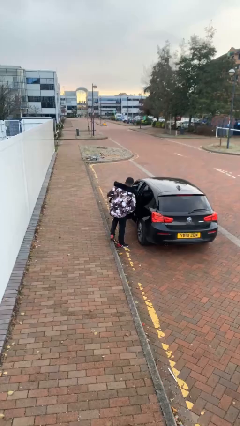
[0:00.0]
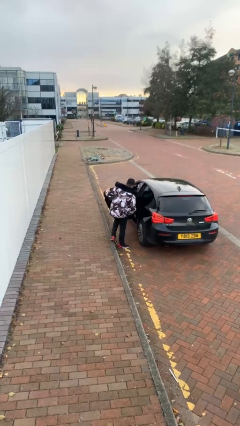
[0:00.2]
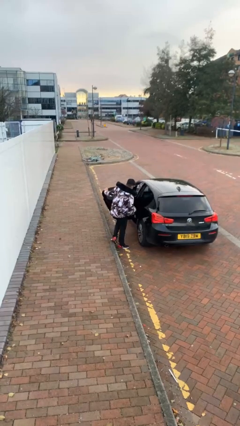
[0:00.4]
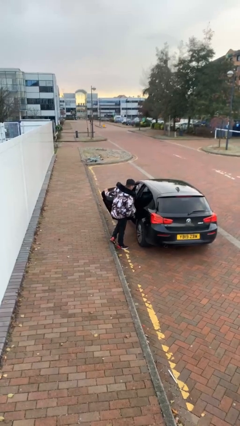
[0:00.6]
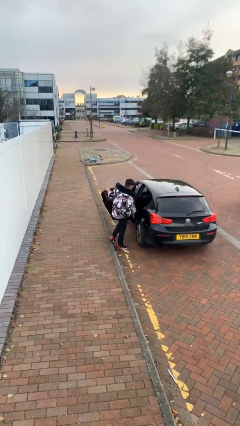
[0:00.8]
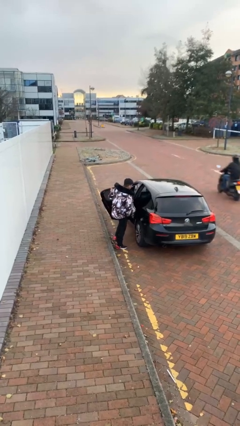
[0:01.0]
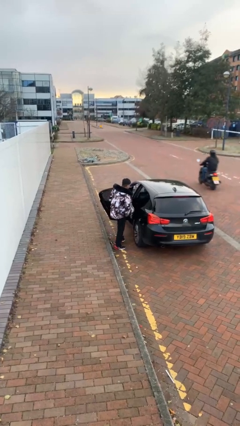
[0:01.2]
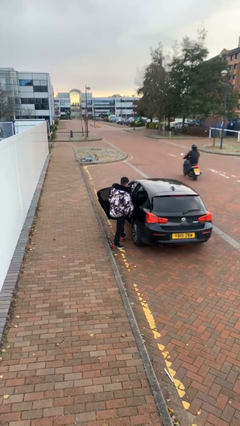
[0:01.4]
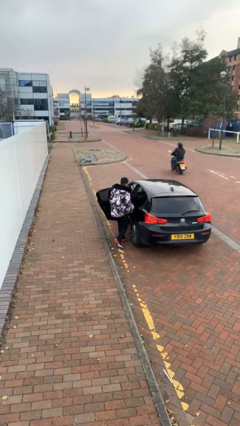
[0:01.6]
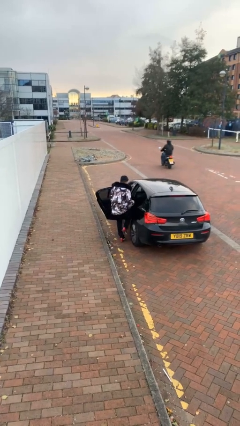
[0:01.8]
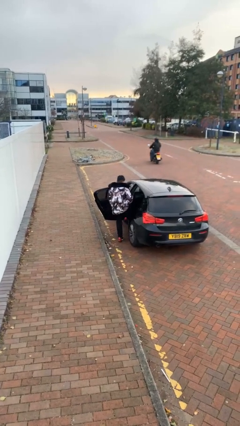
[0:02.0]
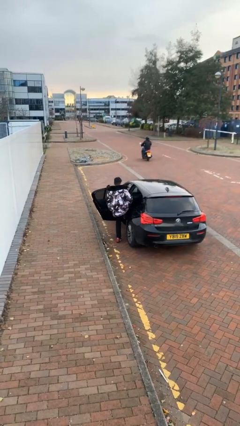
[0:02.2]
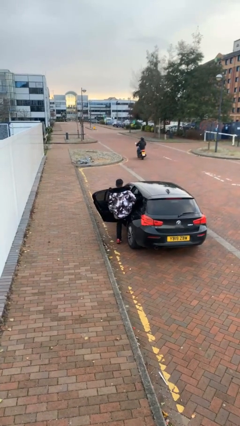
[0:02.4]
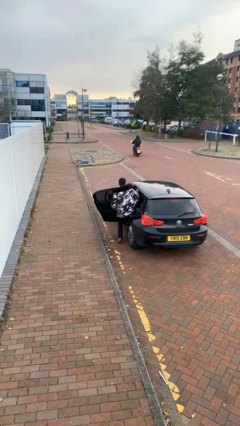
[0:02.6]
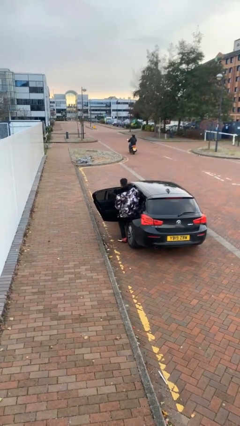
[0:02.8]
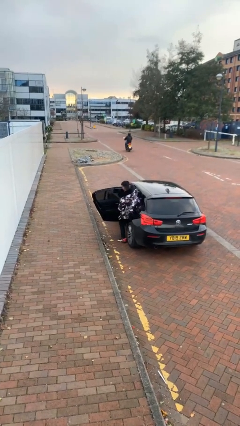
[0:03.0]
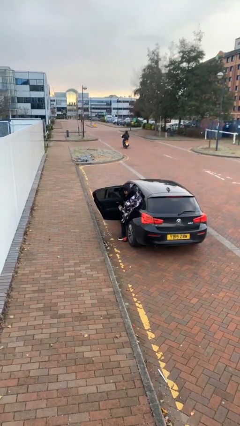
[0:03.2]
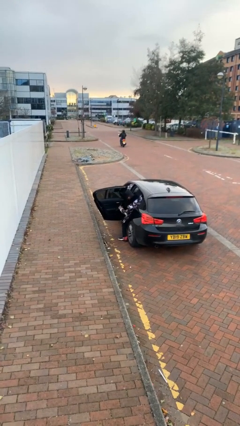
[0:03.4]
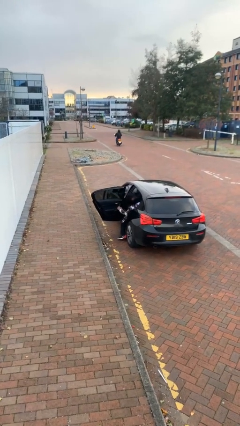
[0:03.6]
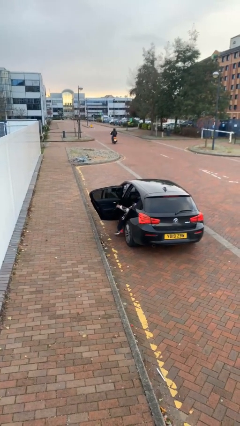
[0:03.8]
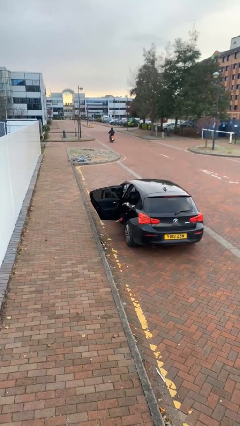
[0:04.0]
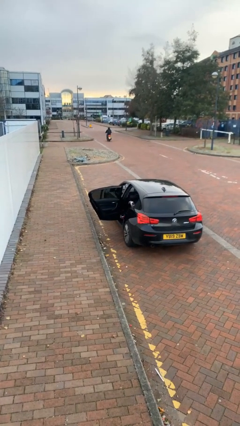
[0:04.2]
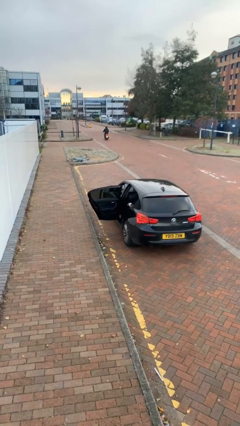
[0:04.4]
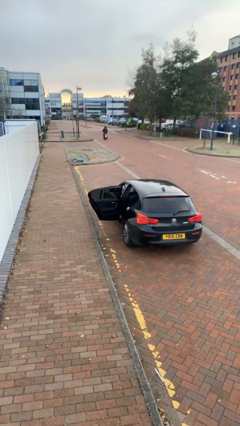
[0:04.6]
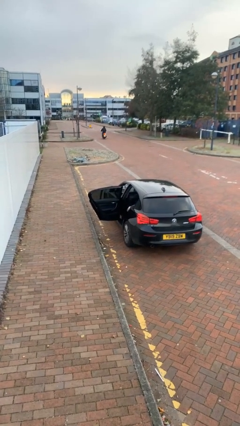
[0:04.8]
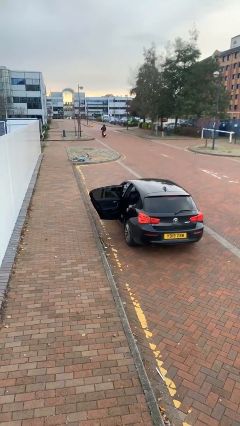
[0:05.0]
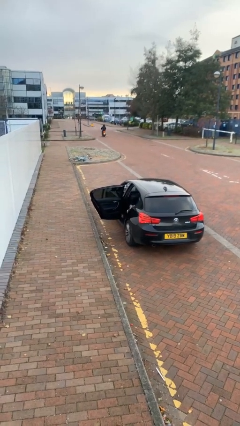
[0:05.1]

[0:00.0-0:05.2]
person enters car

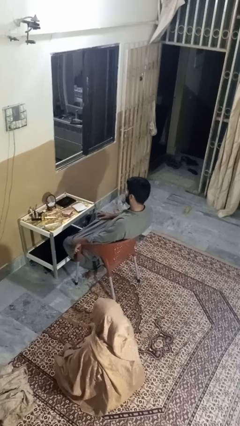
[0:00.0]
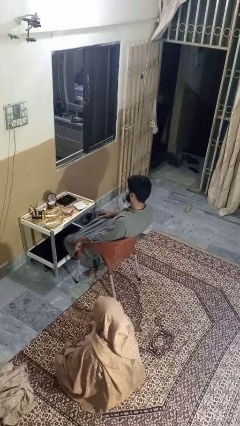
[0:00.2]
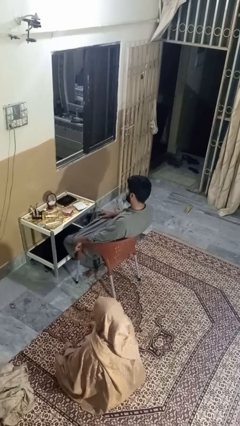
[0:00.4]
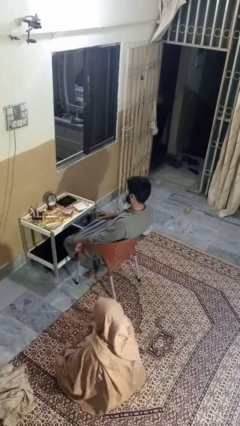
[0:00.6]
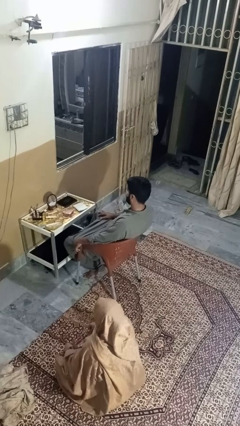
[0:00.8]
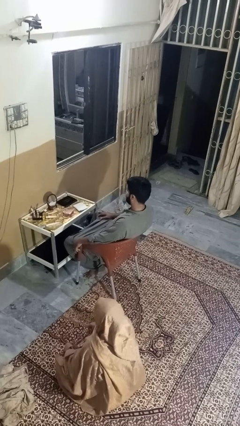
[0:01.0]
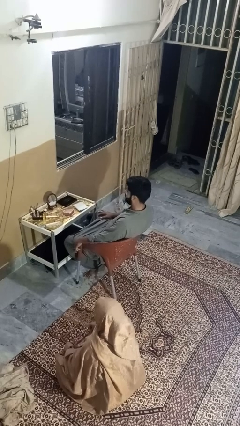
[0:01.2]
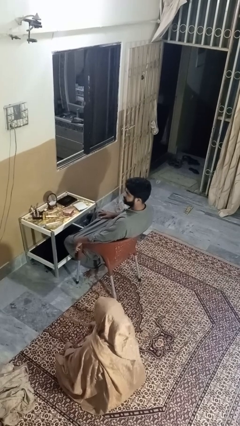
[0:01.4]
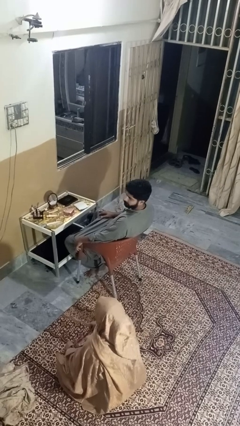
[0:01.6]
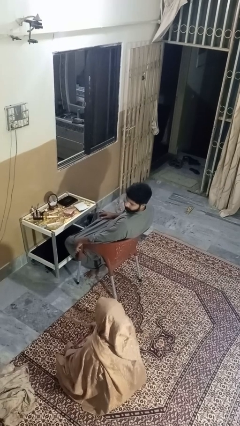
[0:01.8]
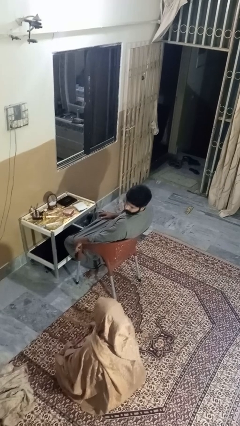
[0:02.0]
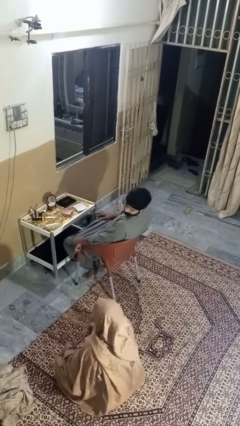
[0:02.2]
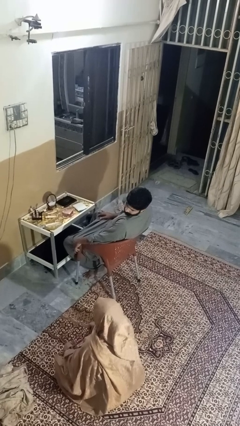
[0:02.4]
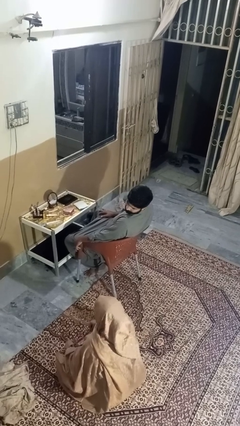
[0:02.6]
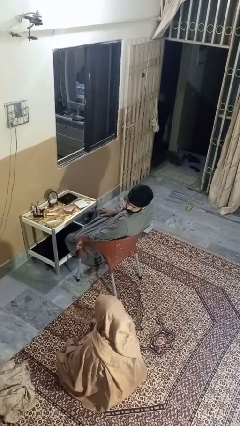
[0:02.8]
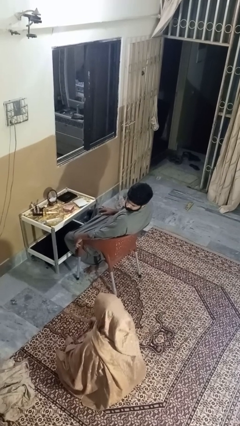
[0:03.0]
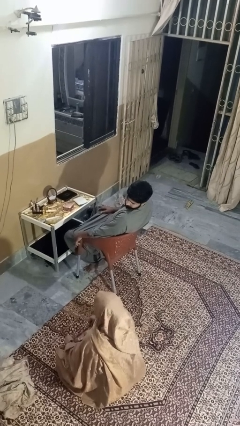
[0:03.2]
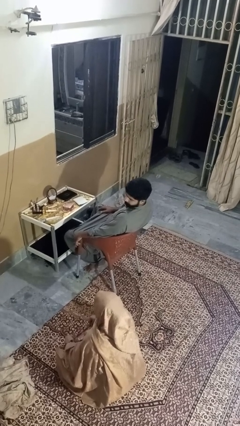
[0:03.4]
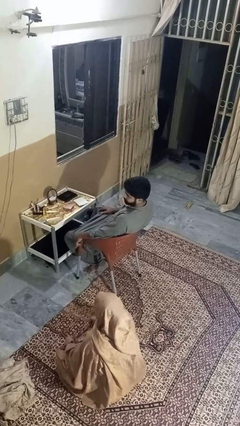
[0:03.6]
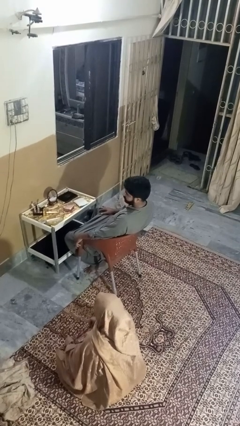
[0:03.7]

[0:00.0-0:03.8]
person looks over shoulder

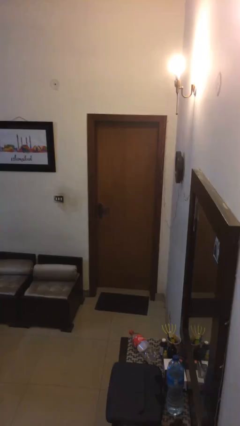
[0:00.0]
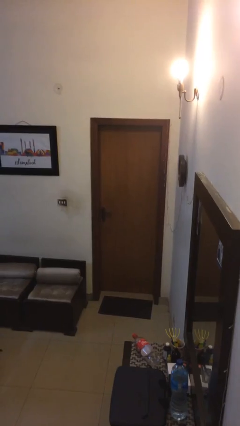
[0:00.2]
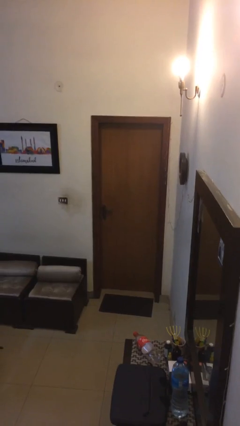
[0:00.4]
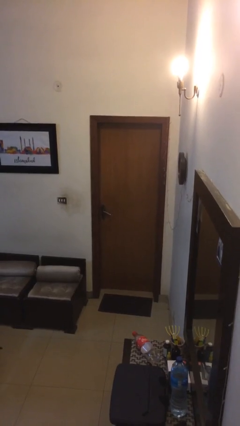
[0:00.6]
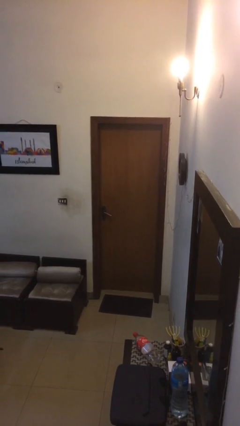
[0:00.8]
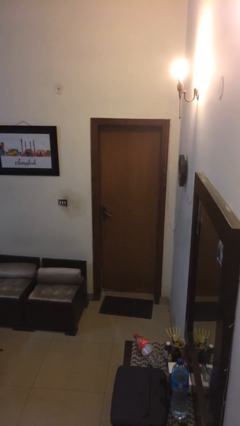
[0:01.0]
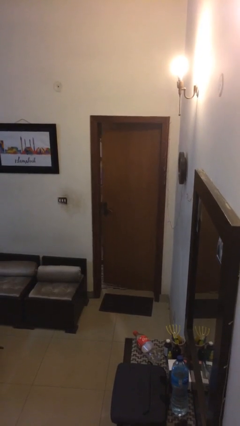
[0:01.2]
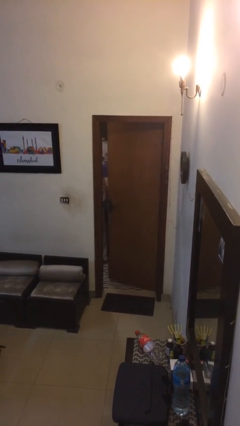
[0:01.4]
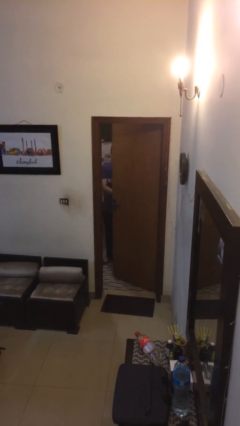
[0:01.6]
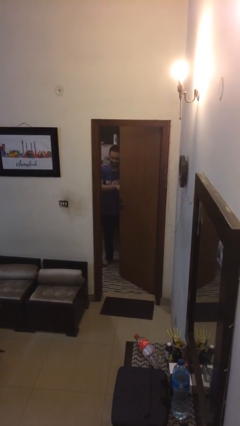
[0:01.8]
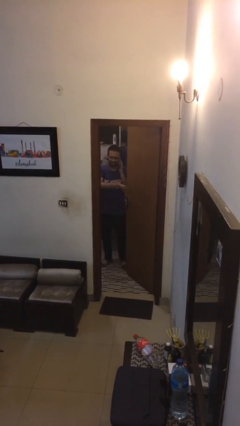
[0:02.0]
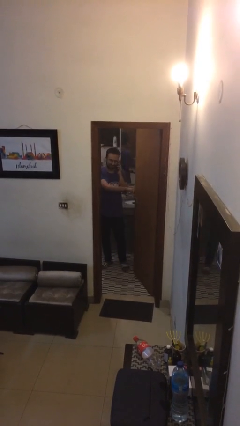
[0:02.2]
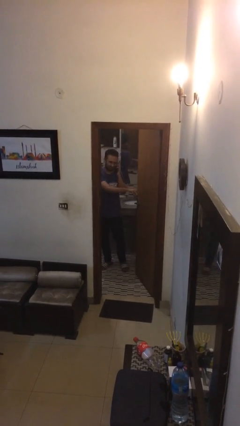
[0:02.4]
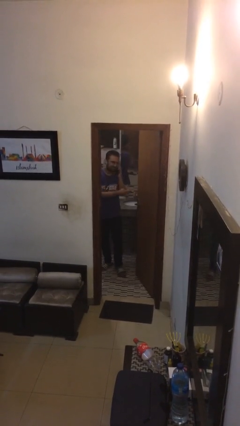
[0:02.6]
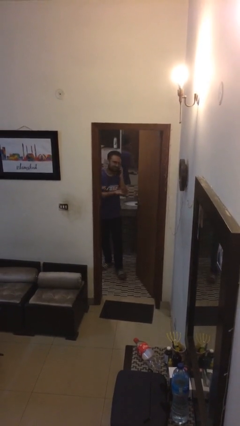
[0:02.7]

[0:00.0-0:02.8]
person opens facility door

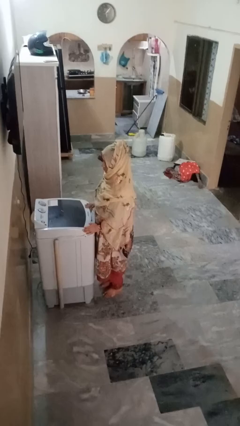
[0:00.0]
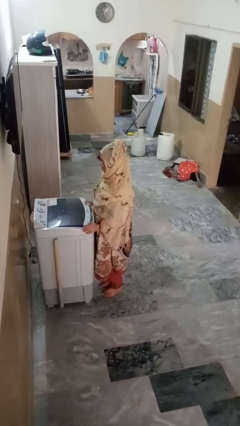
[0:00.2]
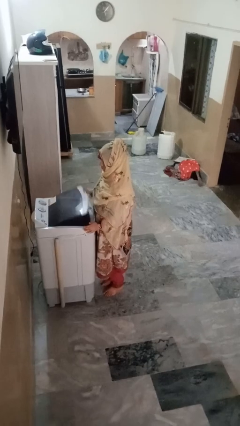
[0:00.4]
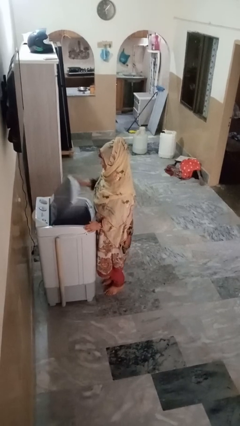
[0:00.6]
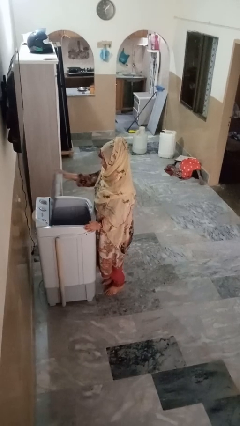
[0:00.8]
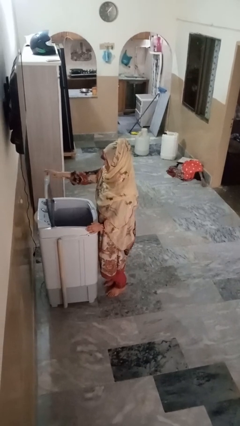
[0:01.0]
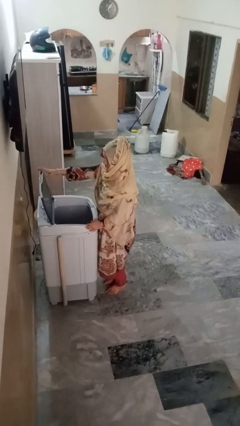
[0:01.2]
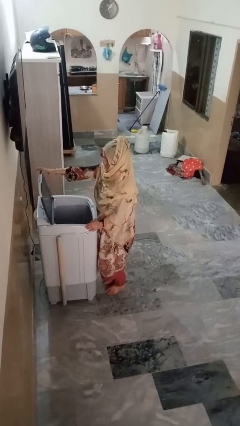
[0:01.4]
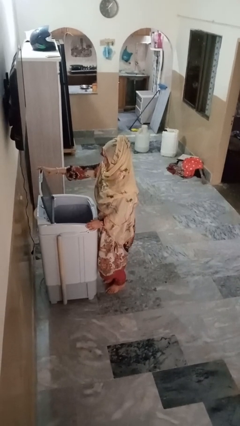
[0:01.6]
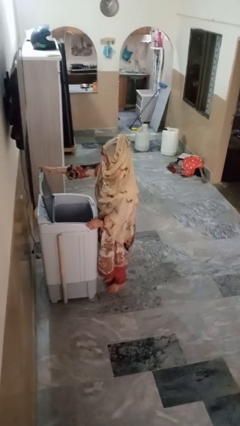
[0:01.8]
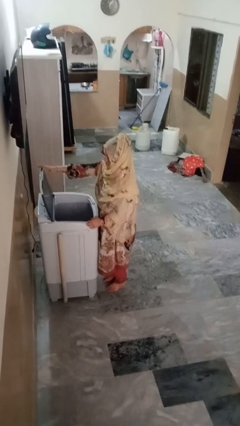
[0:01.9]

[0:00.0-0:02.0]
person opens clothes washer

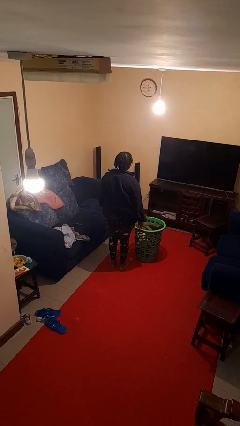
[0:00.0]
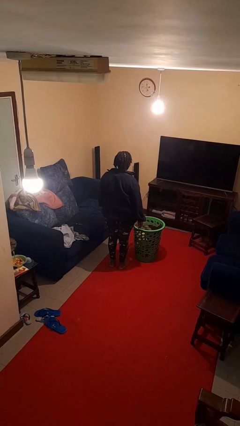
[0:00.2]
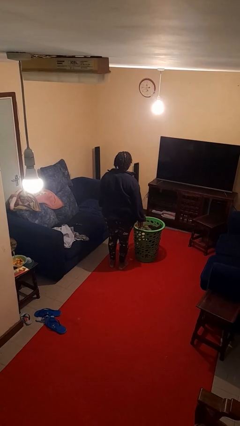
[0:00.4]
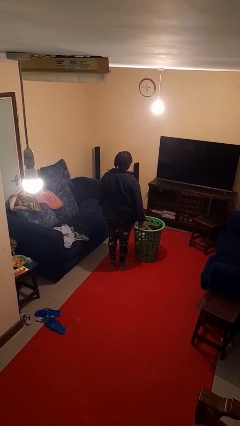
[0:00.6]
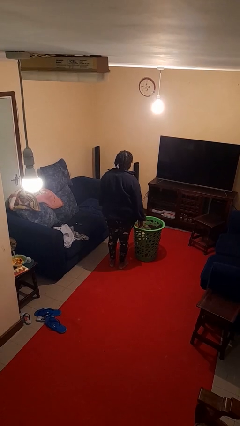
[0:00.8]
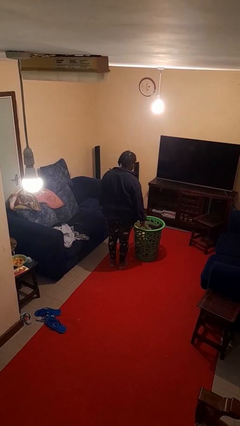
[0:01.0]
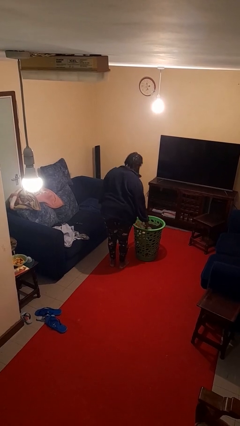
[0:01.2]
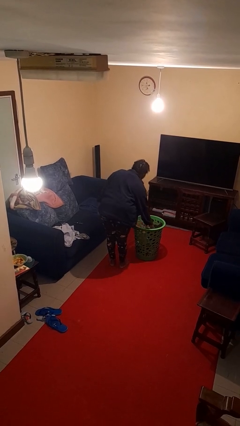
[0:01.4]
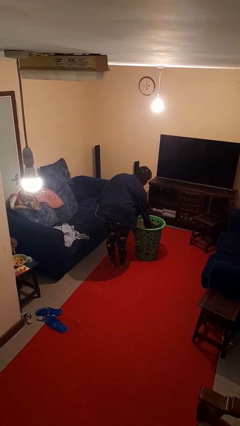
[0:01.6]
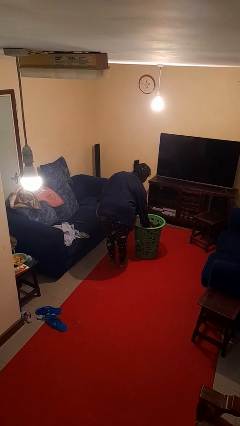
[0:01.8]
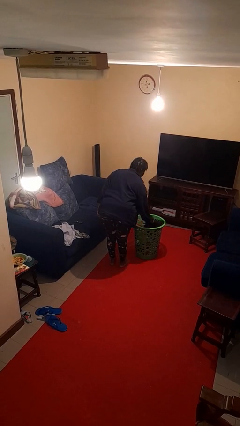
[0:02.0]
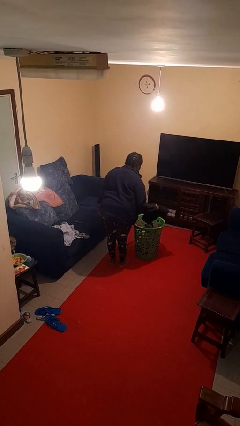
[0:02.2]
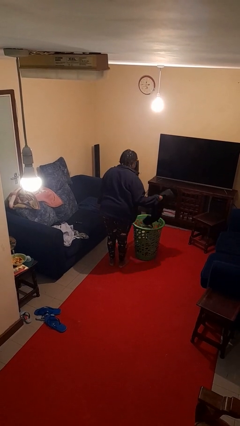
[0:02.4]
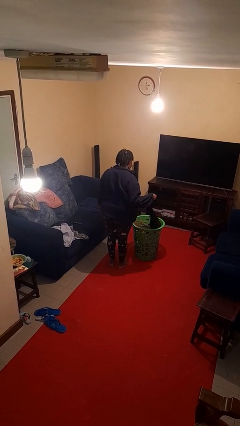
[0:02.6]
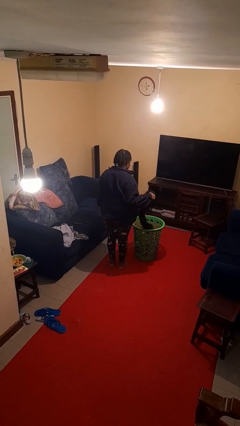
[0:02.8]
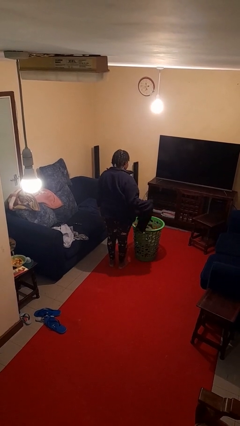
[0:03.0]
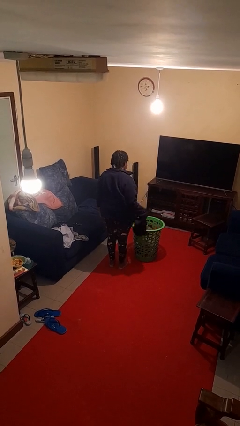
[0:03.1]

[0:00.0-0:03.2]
person takes object from basket
